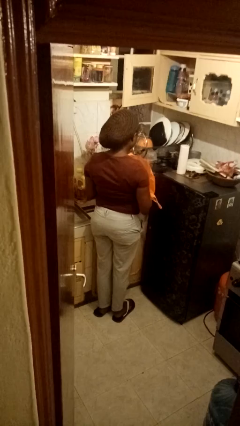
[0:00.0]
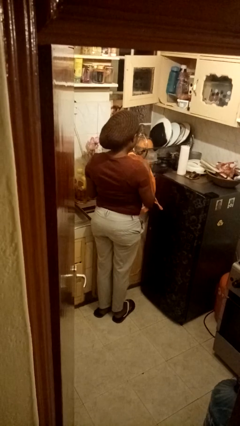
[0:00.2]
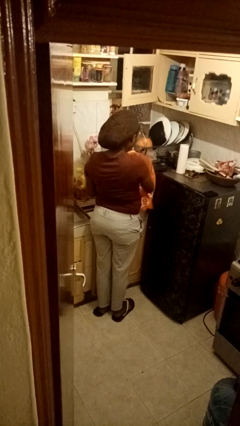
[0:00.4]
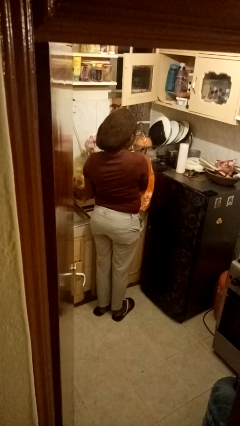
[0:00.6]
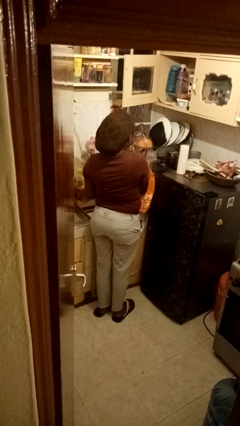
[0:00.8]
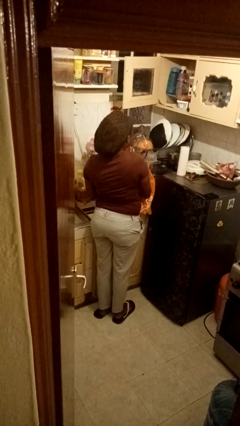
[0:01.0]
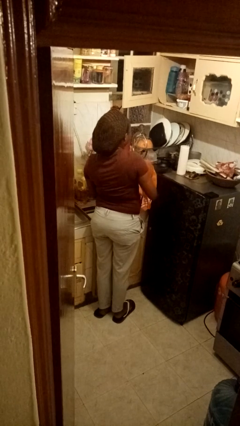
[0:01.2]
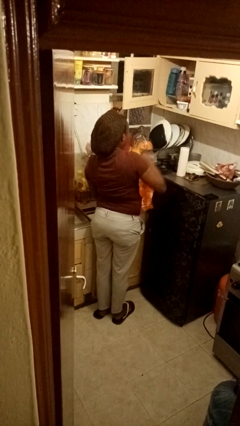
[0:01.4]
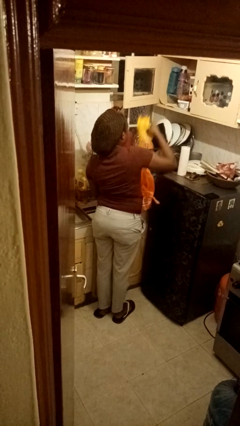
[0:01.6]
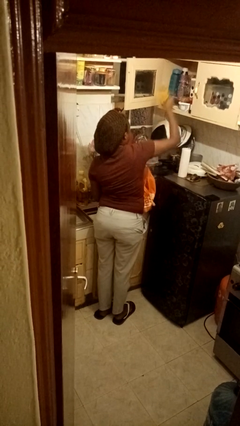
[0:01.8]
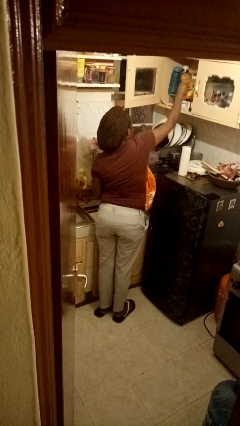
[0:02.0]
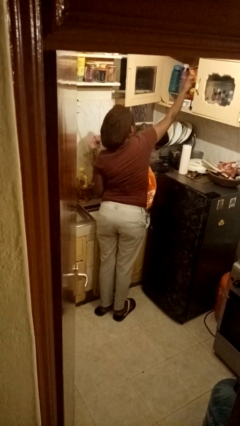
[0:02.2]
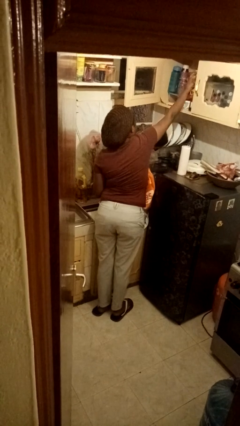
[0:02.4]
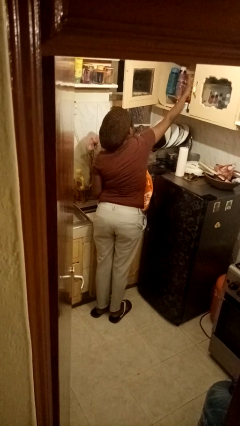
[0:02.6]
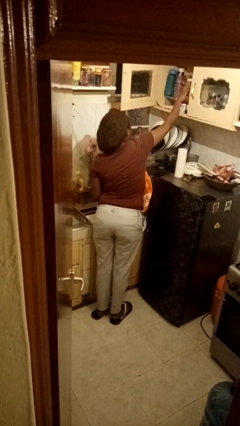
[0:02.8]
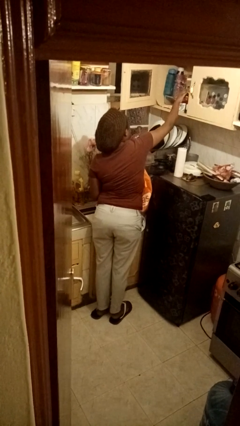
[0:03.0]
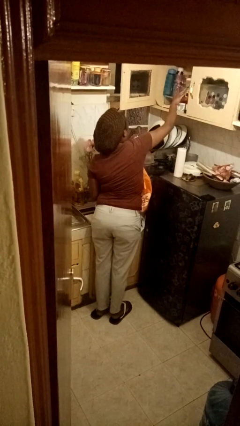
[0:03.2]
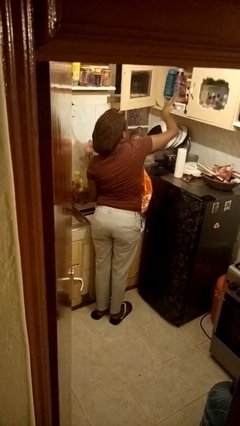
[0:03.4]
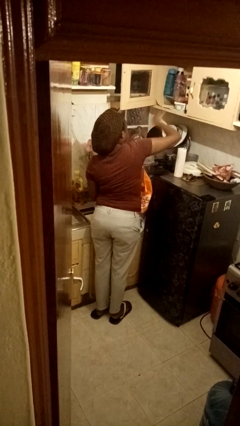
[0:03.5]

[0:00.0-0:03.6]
person loads groceries into cabinet

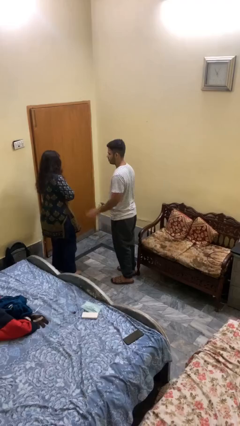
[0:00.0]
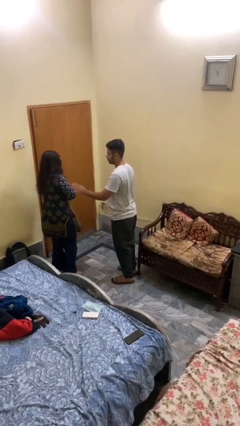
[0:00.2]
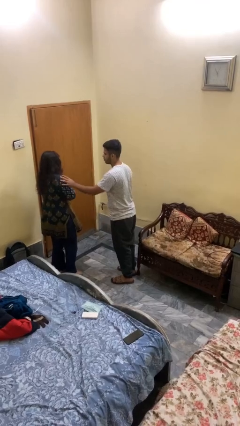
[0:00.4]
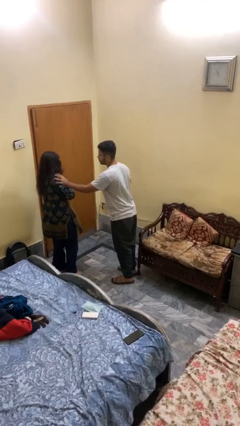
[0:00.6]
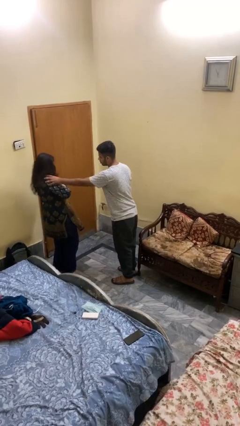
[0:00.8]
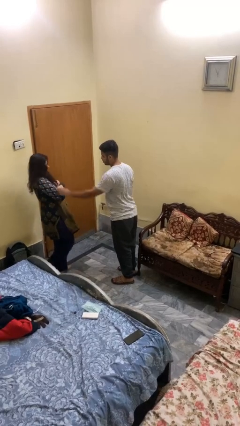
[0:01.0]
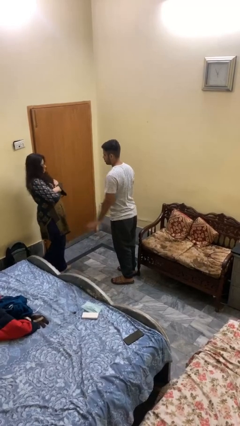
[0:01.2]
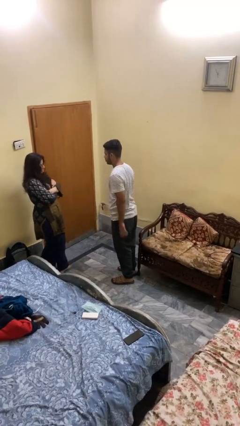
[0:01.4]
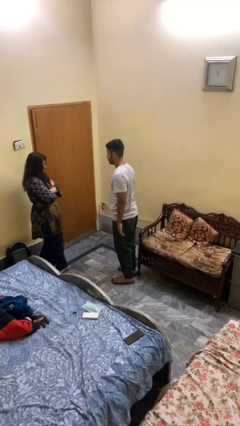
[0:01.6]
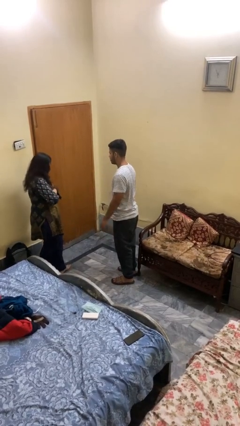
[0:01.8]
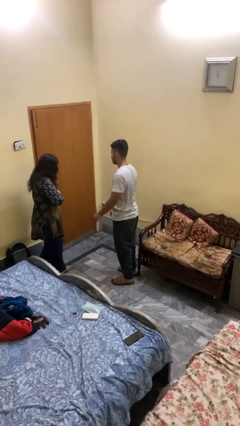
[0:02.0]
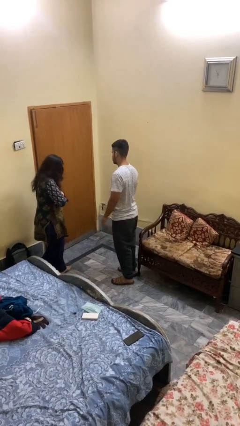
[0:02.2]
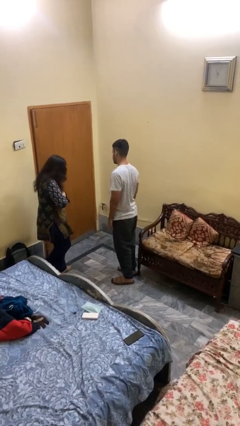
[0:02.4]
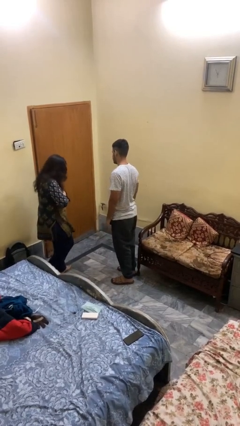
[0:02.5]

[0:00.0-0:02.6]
person shoves person

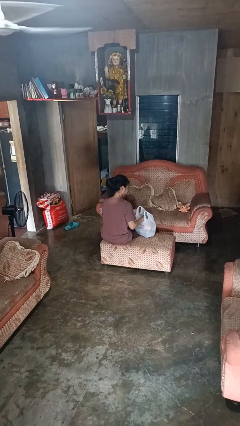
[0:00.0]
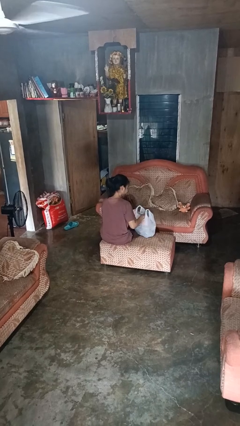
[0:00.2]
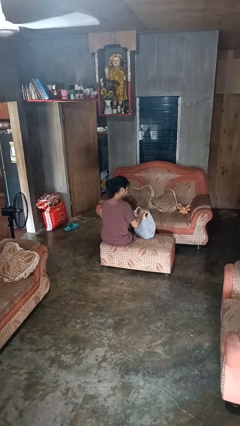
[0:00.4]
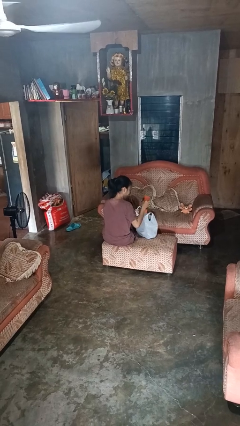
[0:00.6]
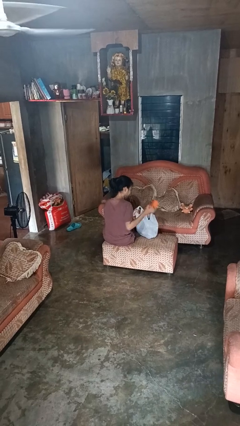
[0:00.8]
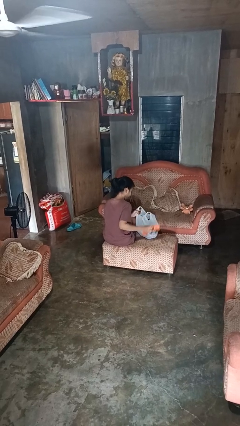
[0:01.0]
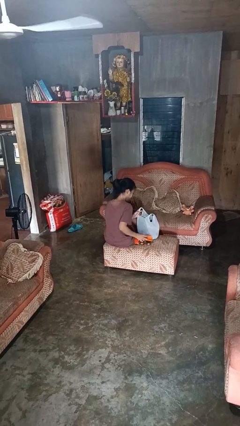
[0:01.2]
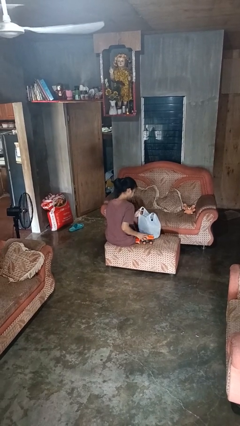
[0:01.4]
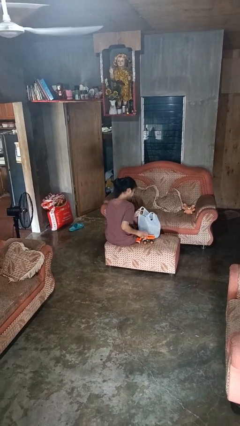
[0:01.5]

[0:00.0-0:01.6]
person takes object from bag

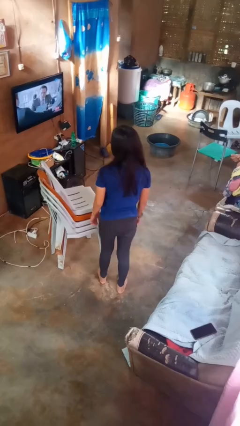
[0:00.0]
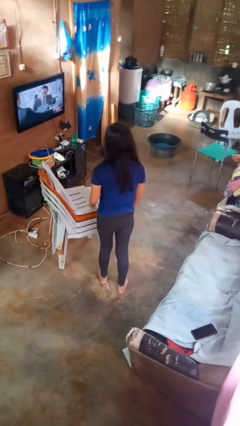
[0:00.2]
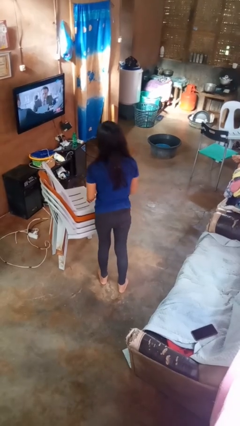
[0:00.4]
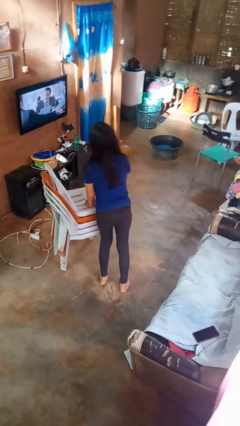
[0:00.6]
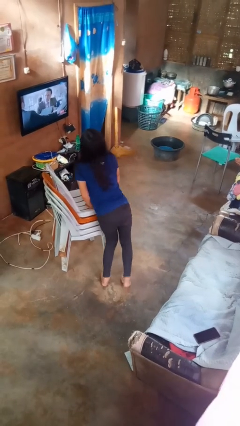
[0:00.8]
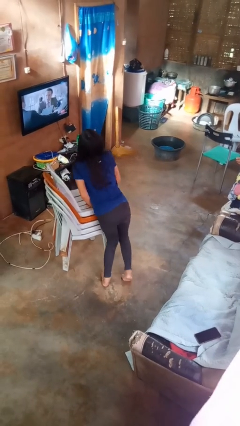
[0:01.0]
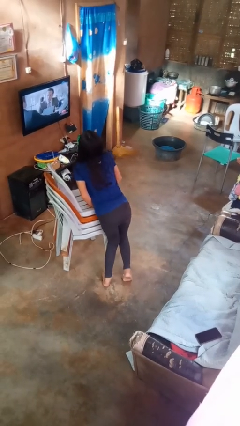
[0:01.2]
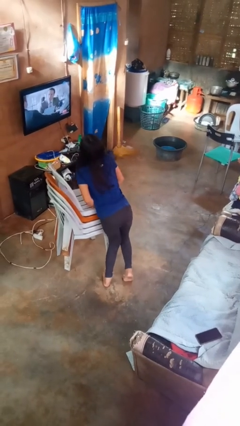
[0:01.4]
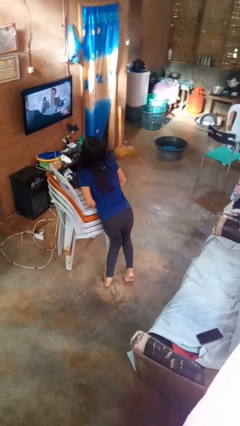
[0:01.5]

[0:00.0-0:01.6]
person trips on object on floor

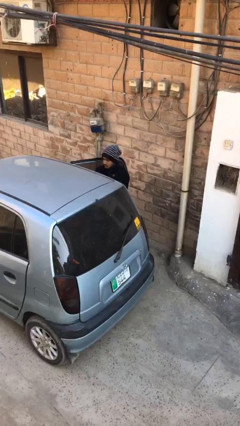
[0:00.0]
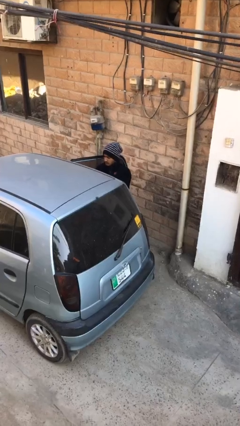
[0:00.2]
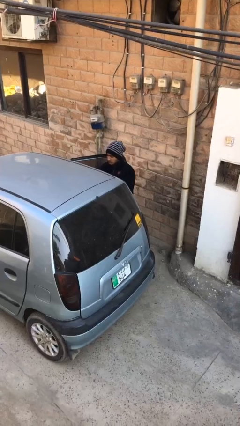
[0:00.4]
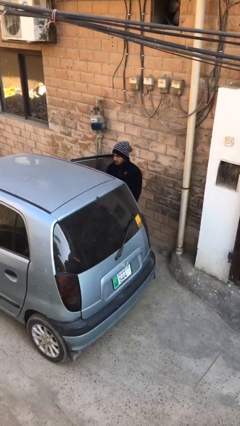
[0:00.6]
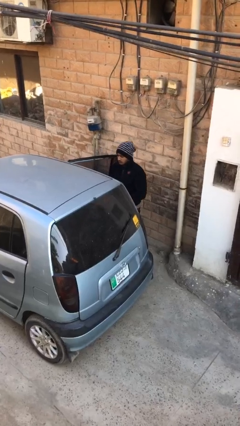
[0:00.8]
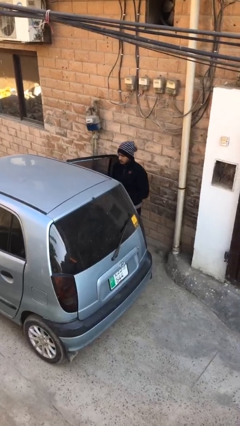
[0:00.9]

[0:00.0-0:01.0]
person unloads car

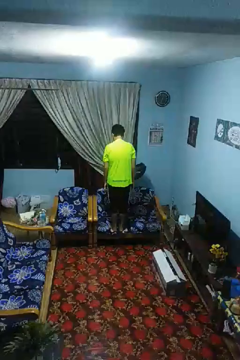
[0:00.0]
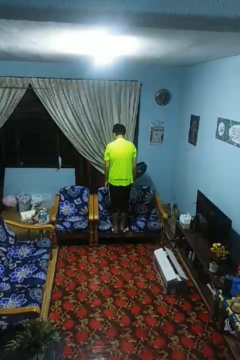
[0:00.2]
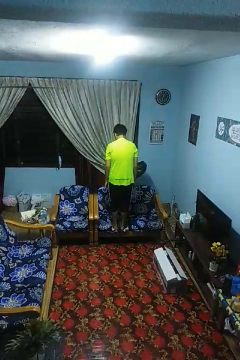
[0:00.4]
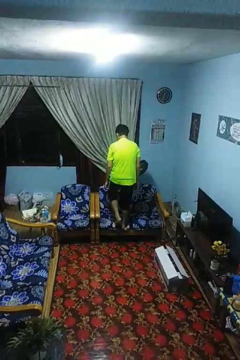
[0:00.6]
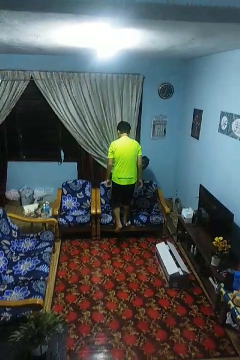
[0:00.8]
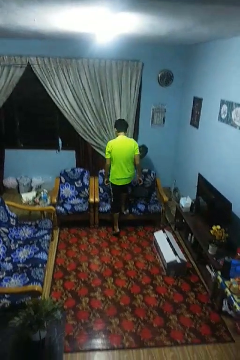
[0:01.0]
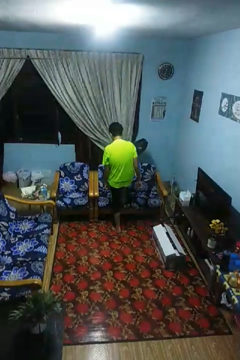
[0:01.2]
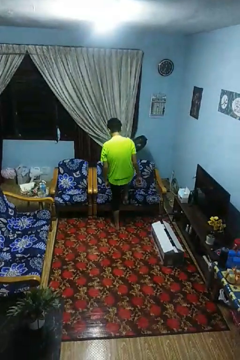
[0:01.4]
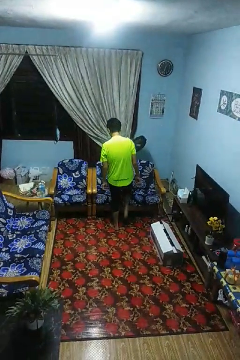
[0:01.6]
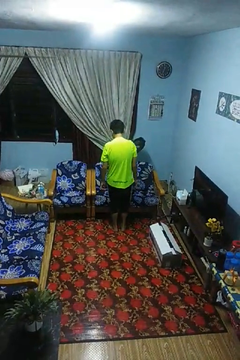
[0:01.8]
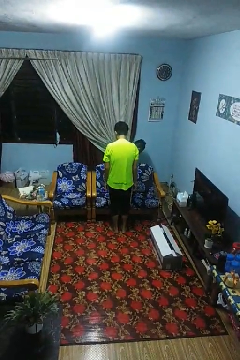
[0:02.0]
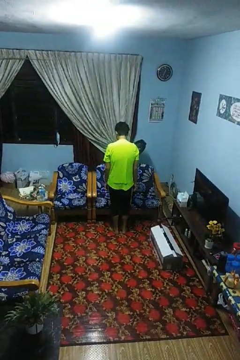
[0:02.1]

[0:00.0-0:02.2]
person climbs off couch

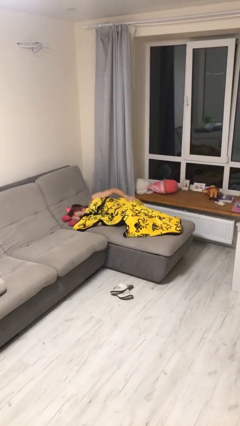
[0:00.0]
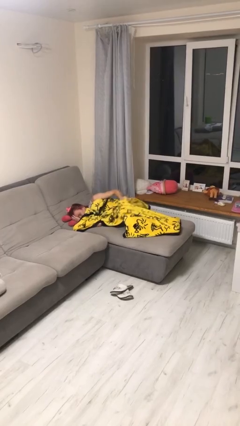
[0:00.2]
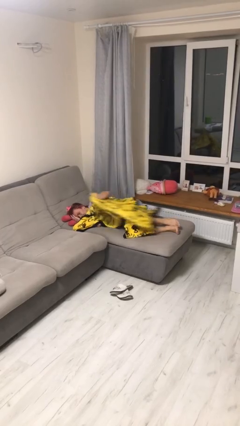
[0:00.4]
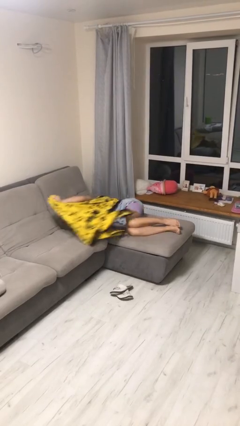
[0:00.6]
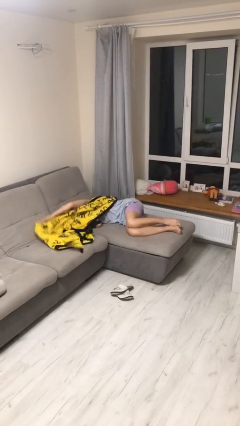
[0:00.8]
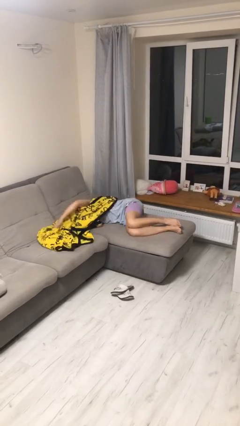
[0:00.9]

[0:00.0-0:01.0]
person uncovers with bedsheets

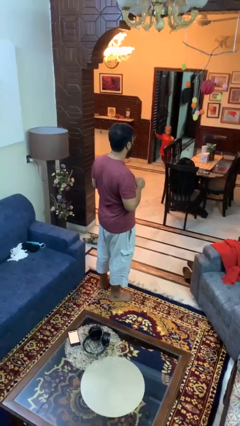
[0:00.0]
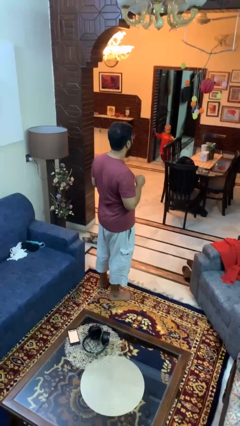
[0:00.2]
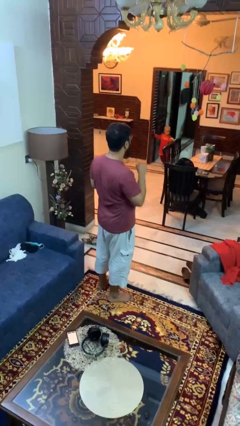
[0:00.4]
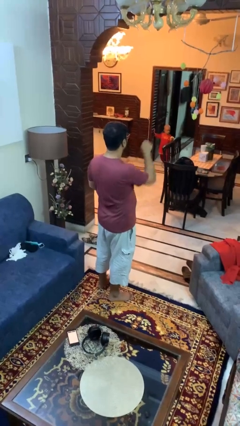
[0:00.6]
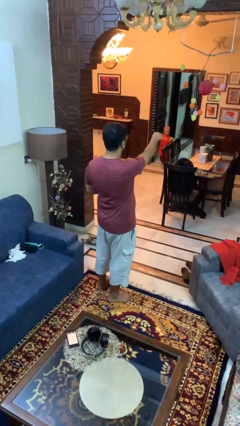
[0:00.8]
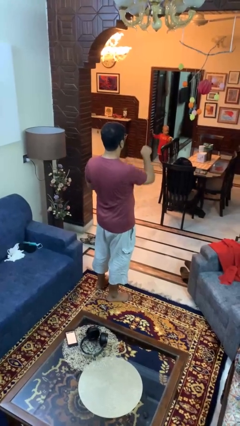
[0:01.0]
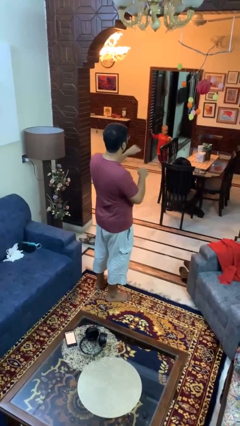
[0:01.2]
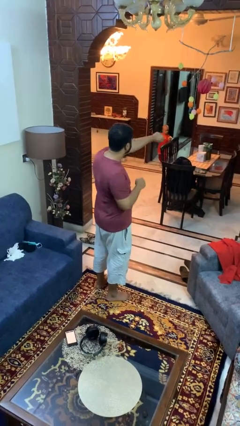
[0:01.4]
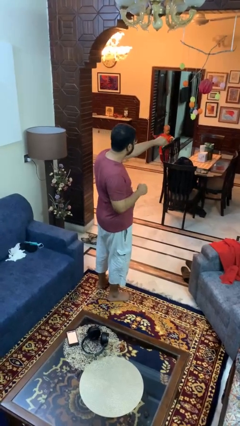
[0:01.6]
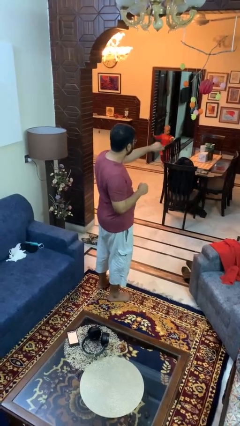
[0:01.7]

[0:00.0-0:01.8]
person punches

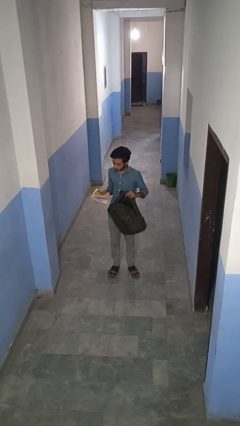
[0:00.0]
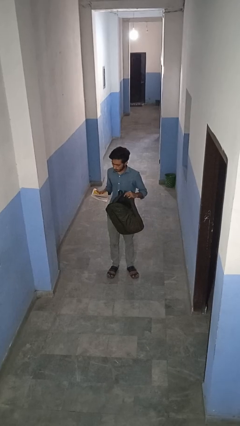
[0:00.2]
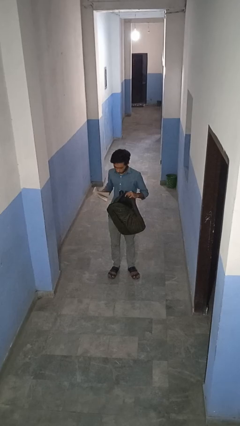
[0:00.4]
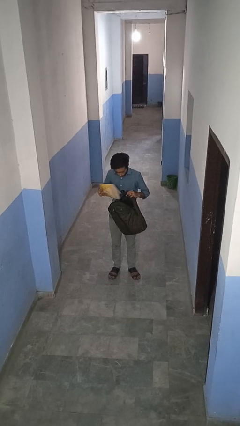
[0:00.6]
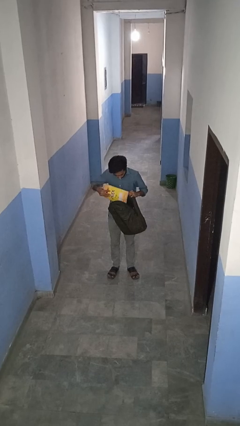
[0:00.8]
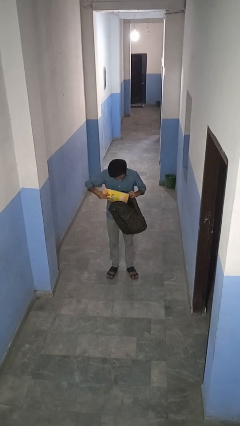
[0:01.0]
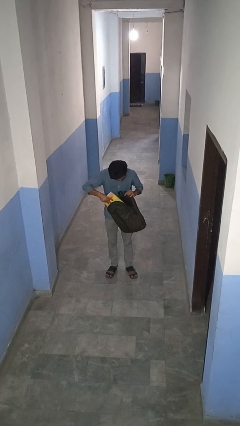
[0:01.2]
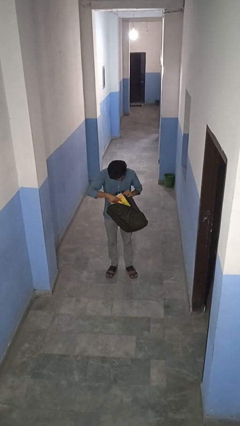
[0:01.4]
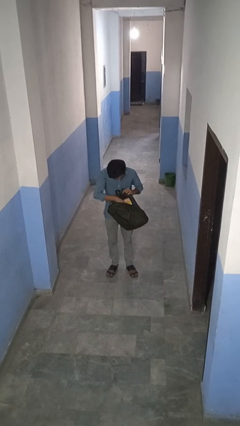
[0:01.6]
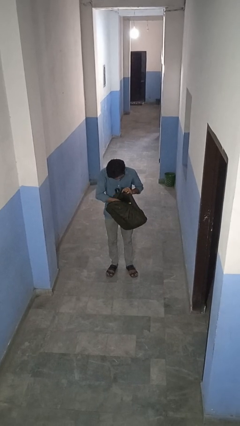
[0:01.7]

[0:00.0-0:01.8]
person puts object into backpack
